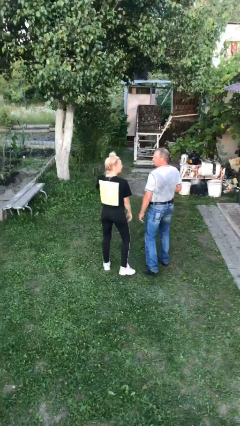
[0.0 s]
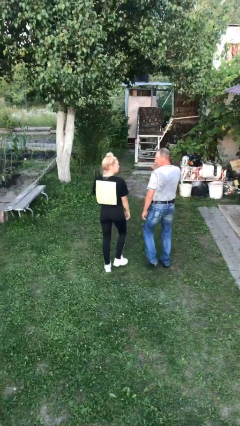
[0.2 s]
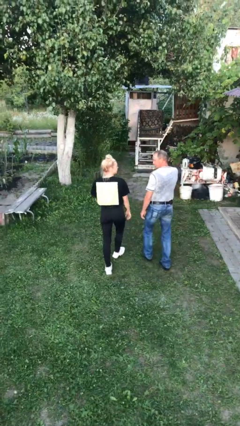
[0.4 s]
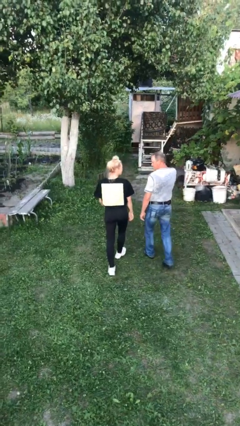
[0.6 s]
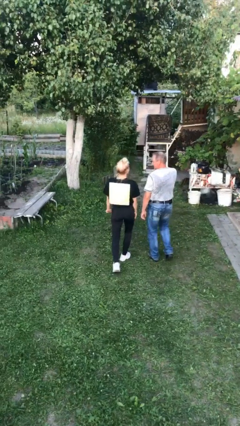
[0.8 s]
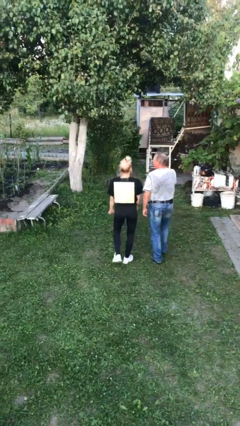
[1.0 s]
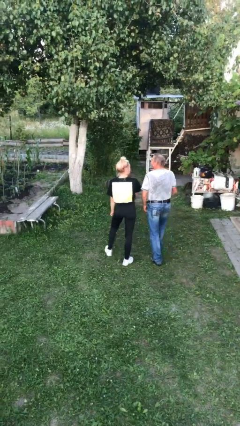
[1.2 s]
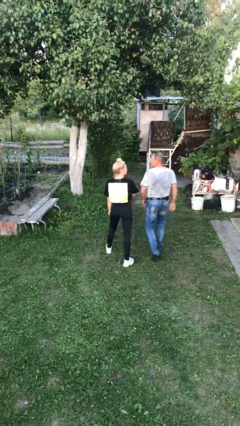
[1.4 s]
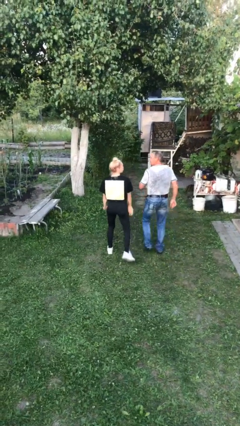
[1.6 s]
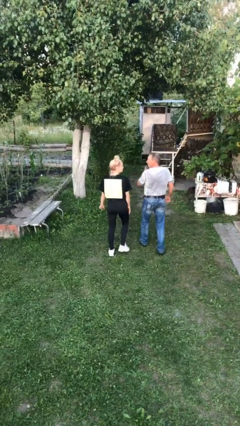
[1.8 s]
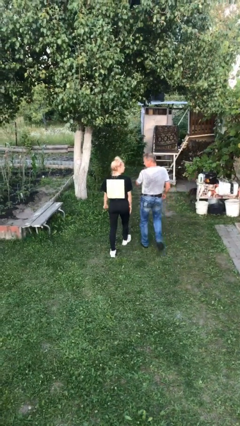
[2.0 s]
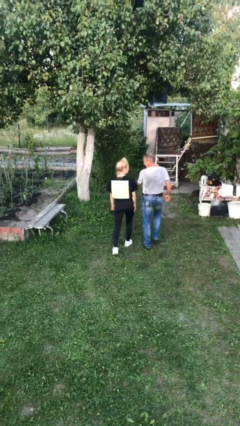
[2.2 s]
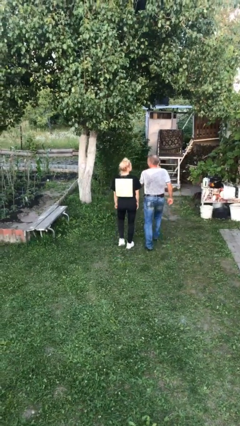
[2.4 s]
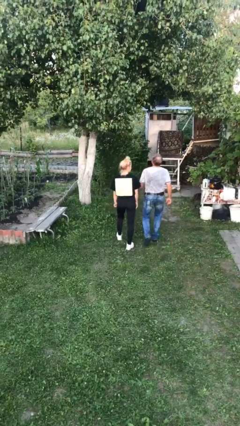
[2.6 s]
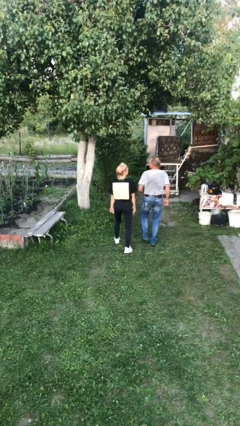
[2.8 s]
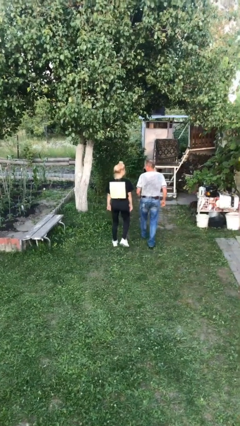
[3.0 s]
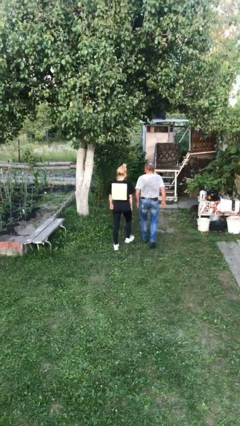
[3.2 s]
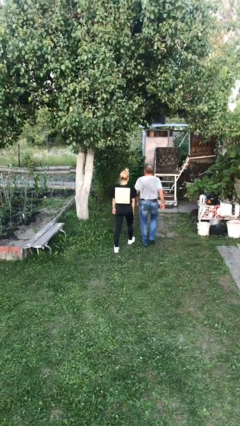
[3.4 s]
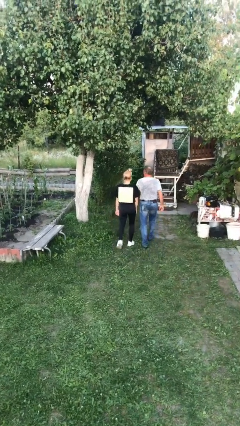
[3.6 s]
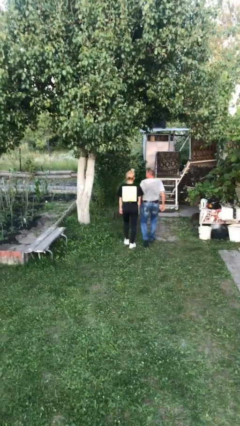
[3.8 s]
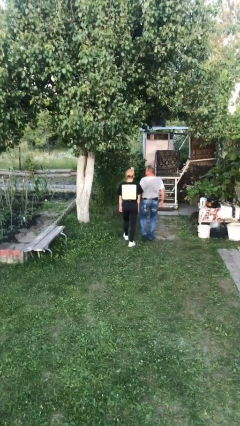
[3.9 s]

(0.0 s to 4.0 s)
person talks to person

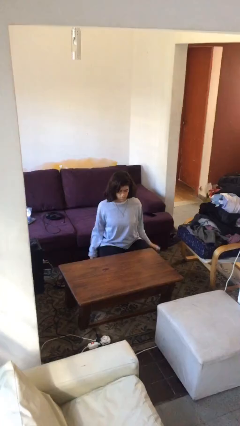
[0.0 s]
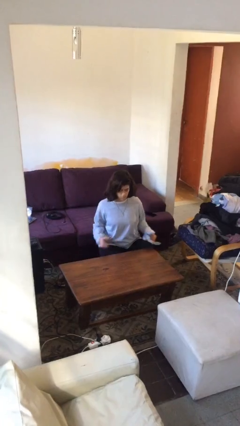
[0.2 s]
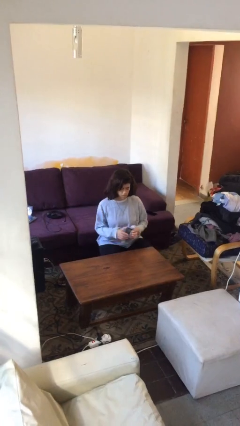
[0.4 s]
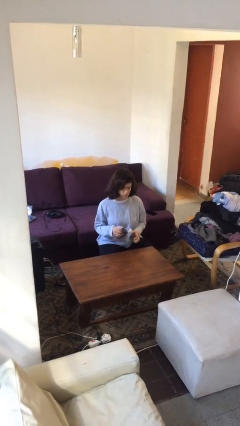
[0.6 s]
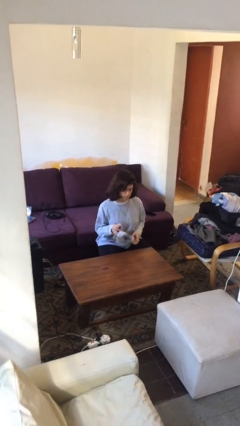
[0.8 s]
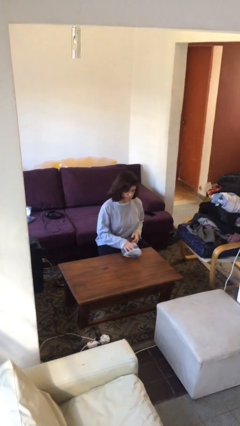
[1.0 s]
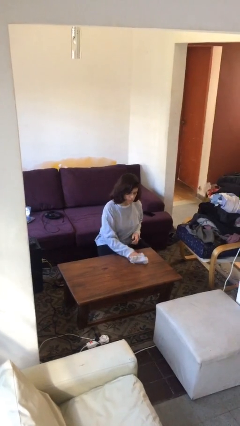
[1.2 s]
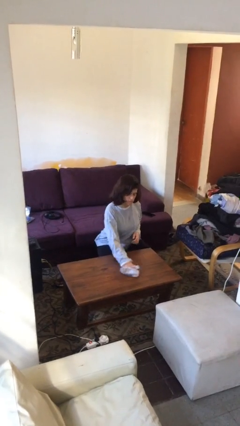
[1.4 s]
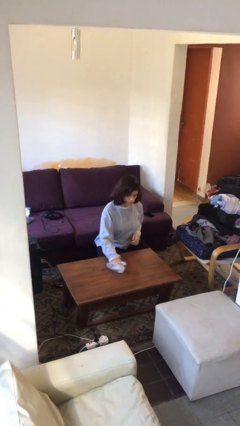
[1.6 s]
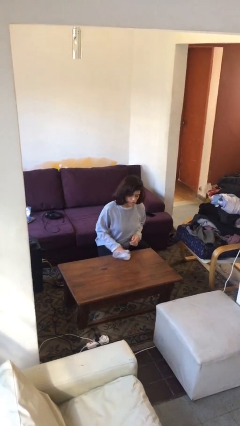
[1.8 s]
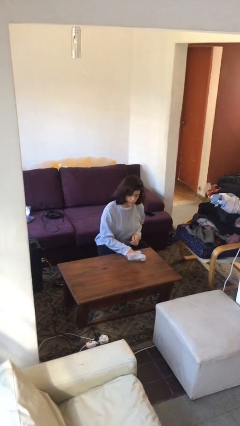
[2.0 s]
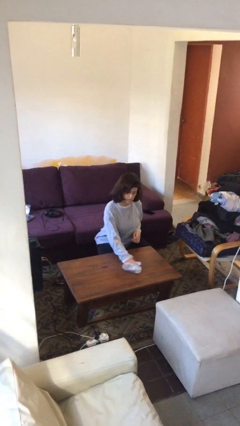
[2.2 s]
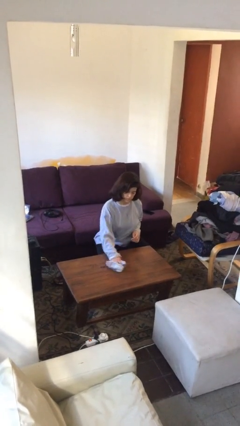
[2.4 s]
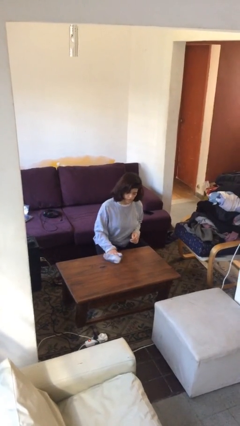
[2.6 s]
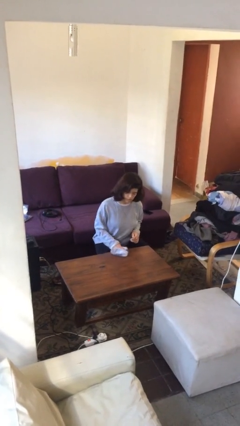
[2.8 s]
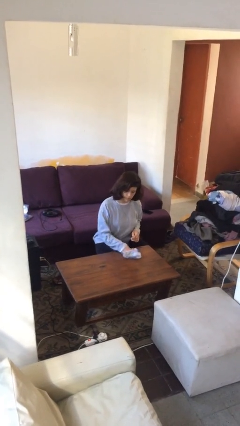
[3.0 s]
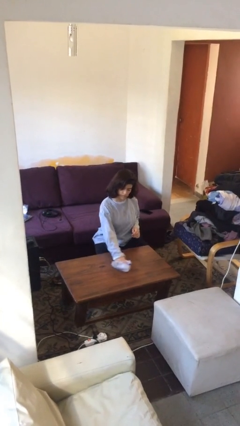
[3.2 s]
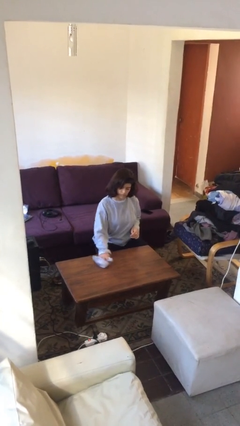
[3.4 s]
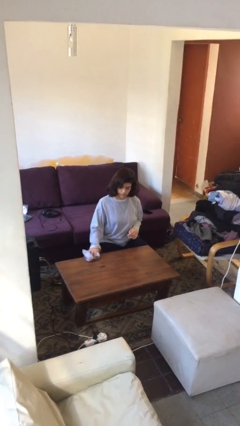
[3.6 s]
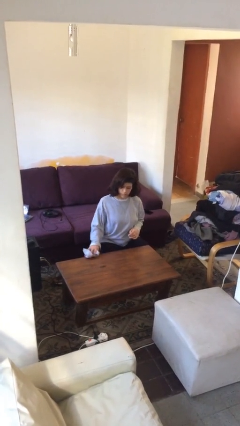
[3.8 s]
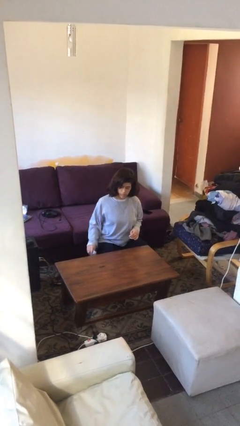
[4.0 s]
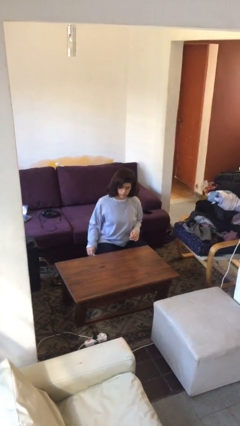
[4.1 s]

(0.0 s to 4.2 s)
person cleans table with rag

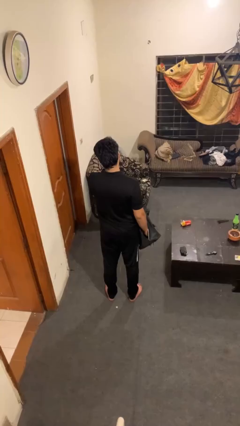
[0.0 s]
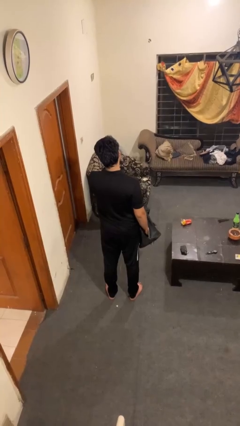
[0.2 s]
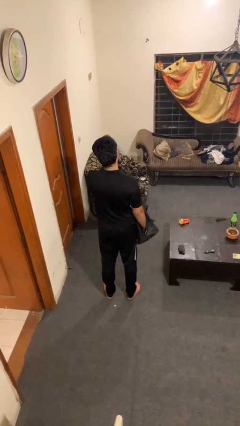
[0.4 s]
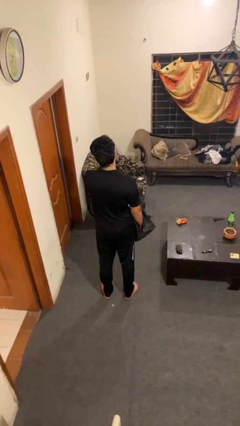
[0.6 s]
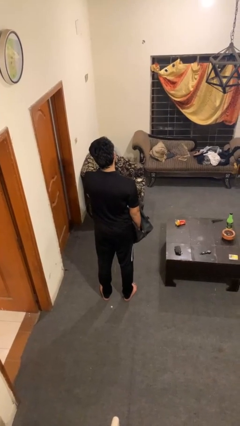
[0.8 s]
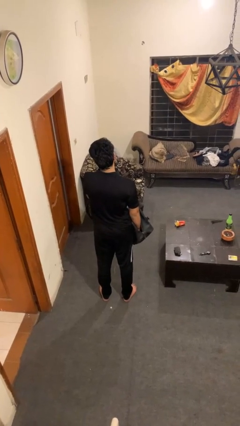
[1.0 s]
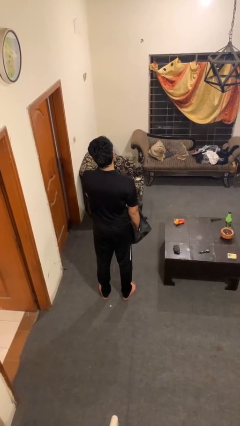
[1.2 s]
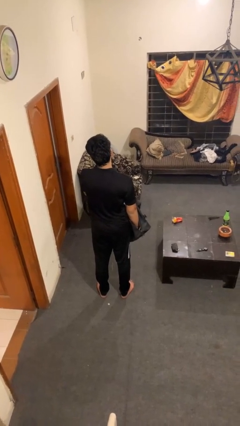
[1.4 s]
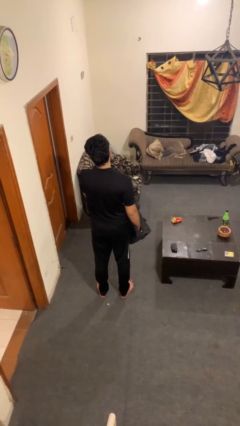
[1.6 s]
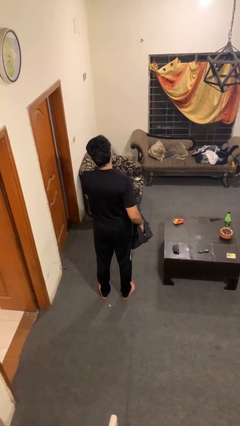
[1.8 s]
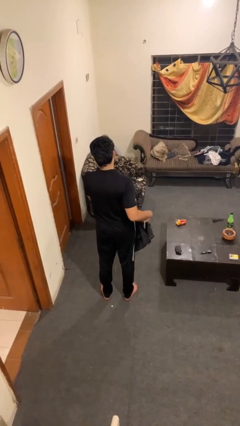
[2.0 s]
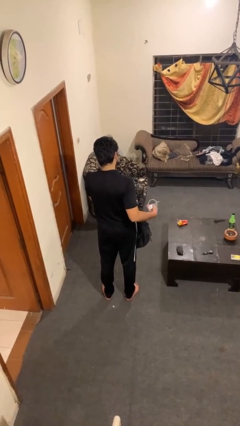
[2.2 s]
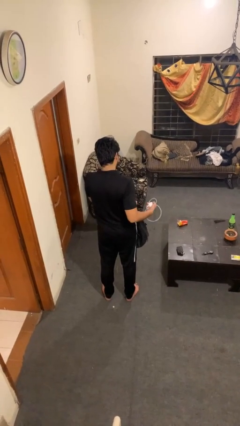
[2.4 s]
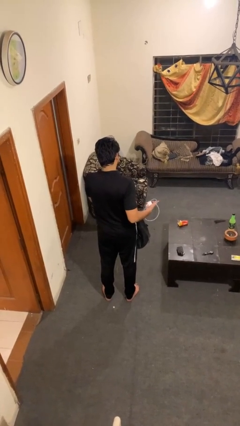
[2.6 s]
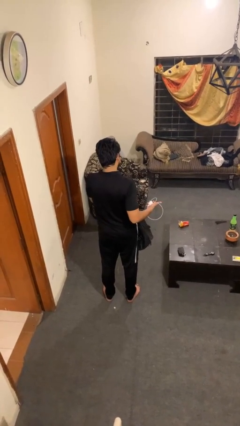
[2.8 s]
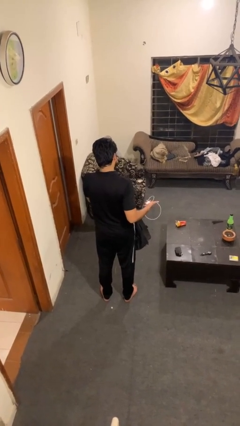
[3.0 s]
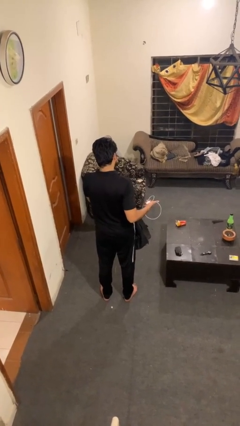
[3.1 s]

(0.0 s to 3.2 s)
person takes object from bag

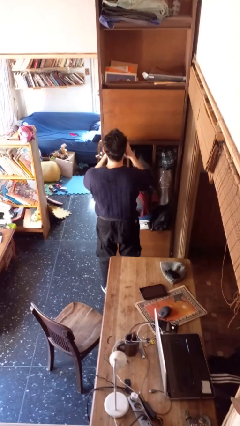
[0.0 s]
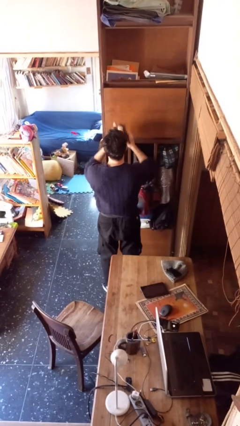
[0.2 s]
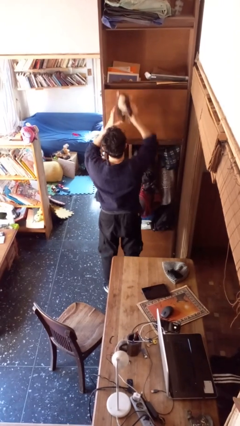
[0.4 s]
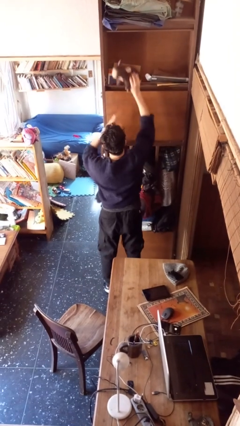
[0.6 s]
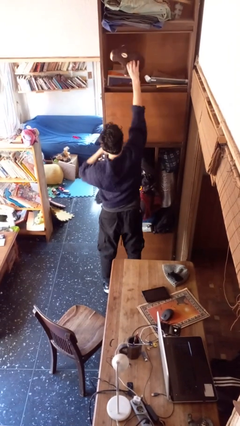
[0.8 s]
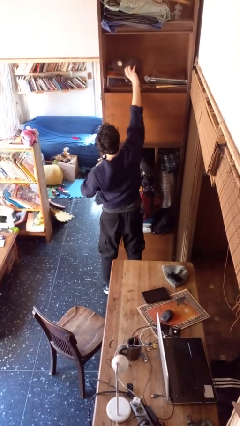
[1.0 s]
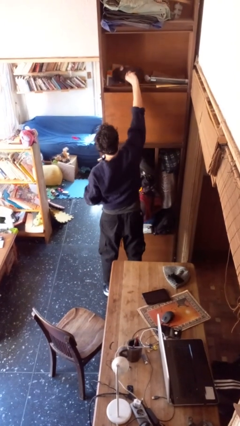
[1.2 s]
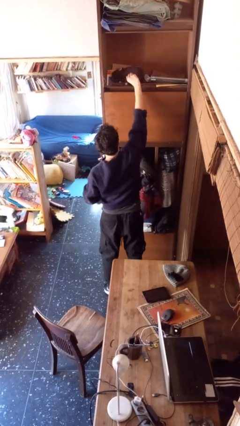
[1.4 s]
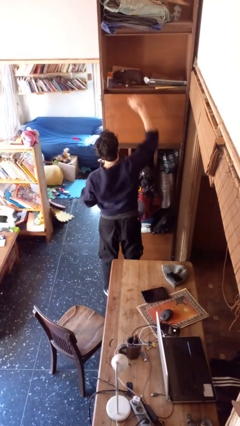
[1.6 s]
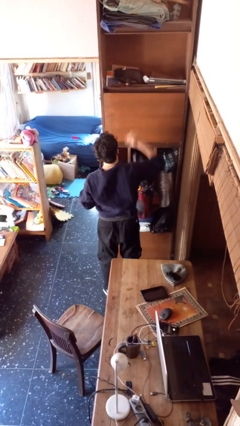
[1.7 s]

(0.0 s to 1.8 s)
person puts down object on shelf

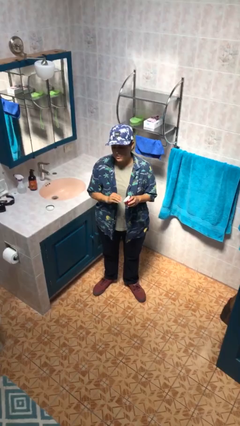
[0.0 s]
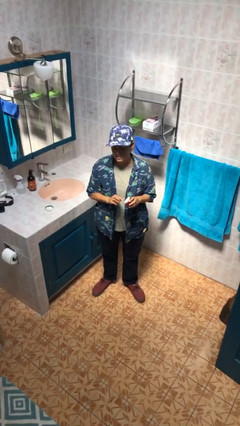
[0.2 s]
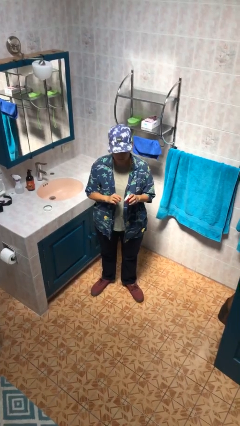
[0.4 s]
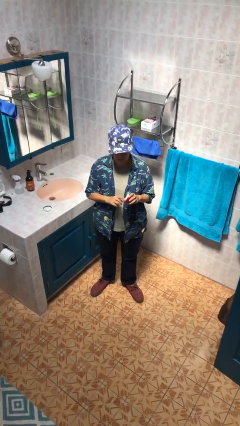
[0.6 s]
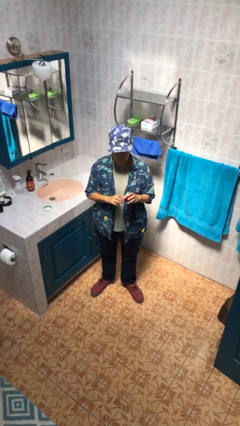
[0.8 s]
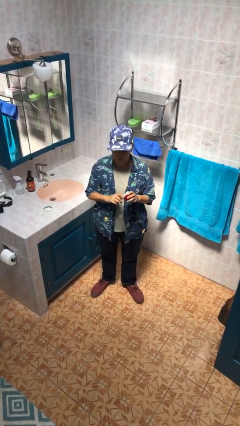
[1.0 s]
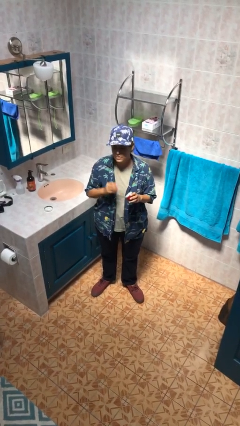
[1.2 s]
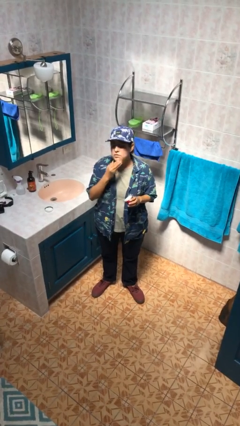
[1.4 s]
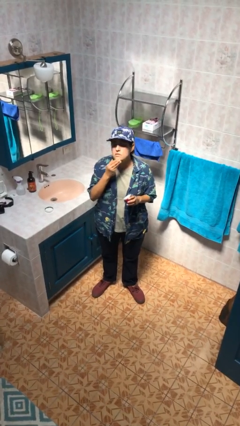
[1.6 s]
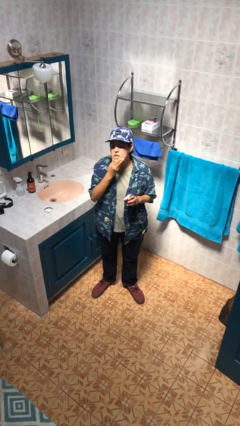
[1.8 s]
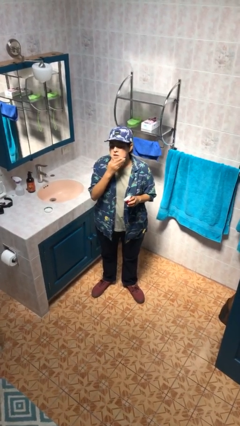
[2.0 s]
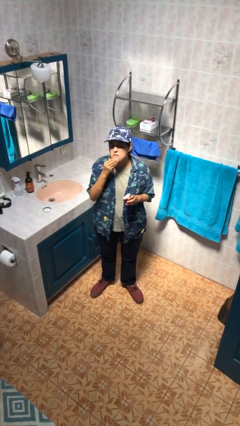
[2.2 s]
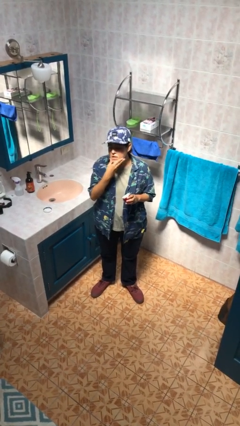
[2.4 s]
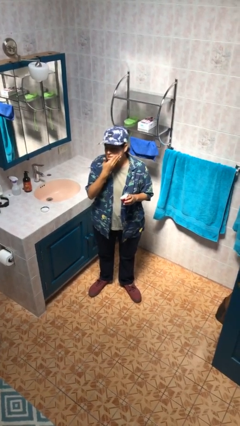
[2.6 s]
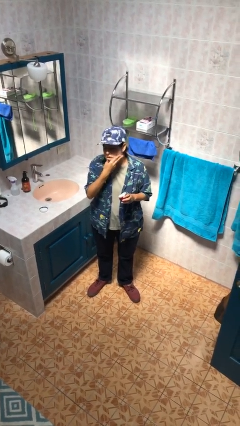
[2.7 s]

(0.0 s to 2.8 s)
person applies facial moisturizer

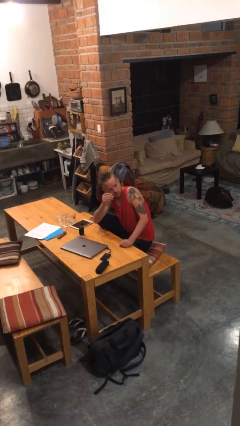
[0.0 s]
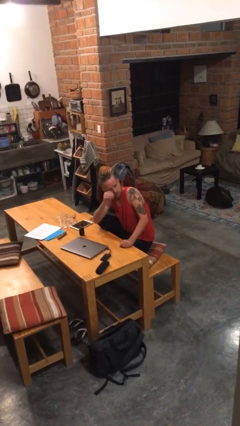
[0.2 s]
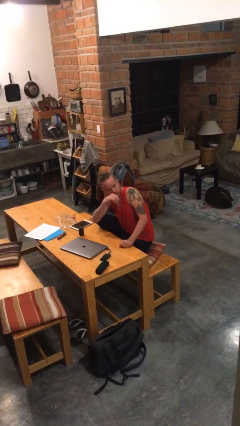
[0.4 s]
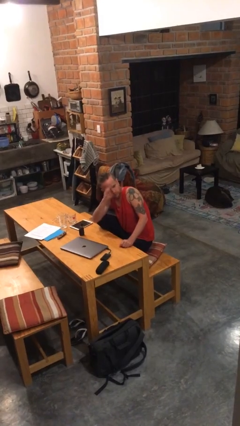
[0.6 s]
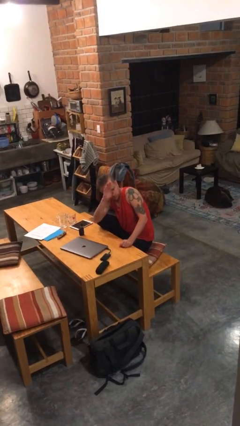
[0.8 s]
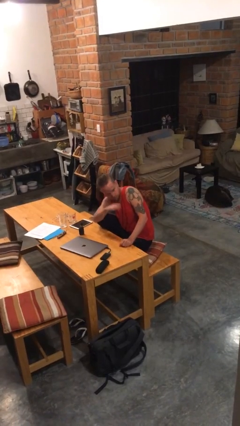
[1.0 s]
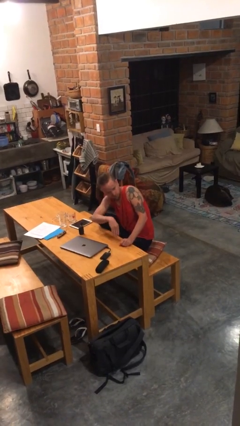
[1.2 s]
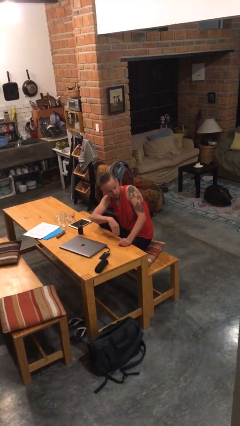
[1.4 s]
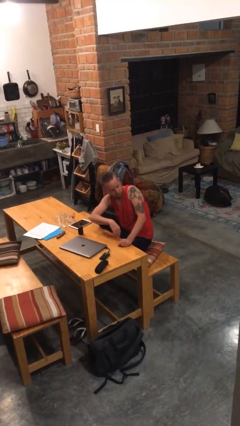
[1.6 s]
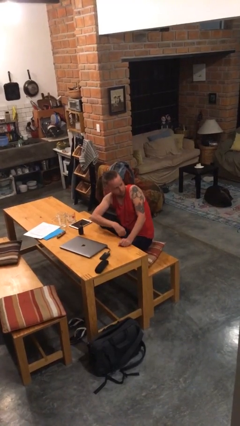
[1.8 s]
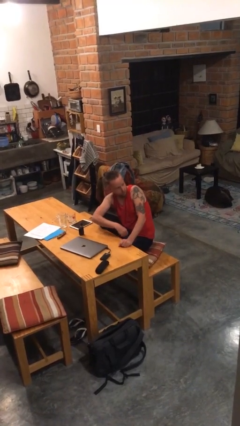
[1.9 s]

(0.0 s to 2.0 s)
person gestures swipe down
